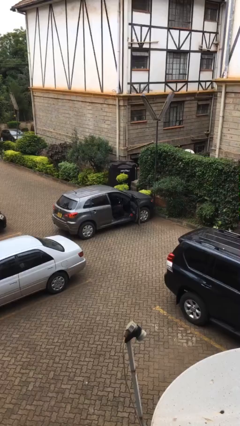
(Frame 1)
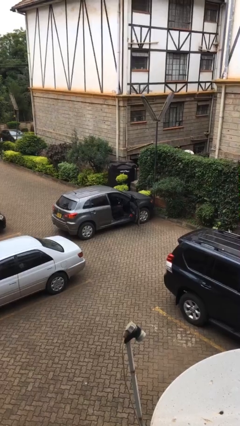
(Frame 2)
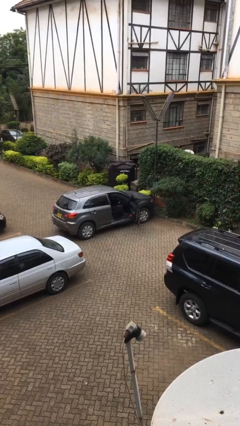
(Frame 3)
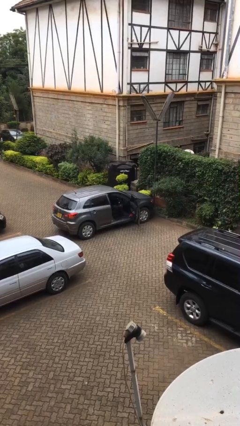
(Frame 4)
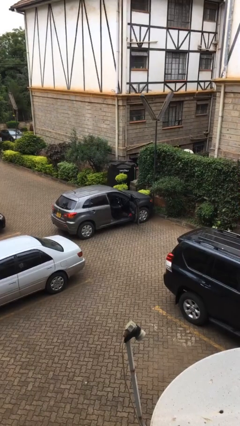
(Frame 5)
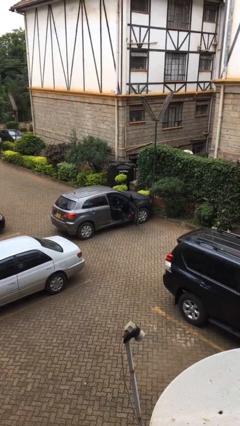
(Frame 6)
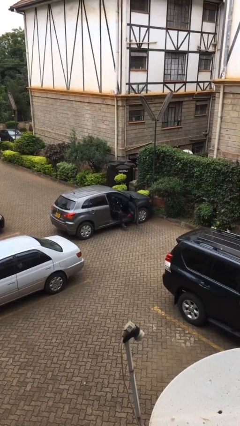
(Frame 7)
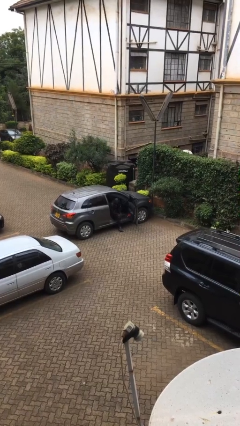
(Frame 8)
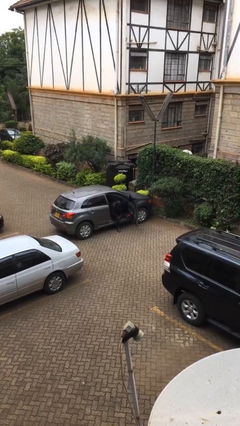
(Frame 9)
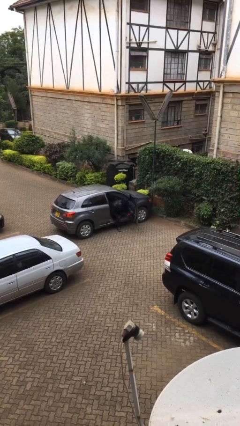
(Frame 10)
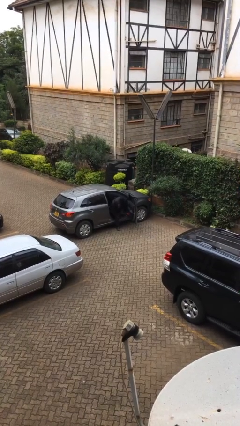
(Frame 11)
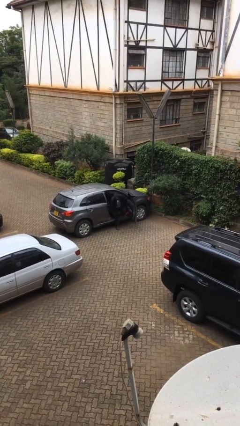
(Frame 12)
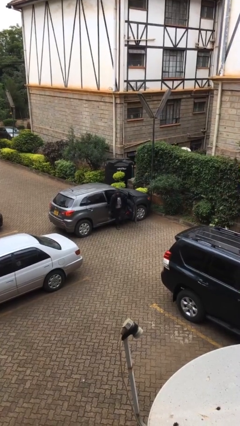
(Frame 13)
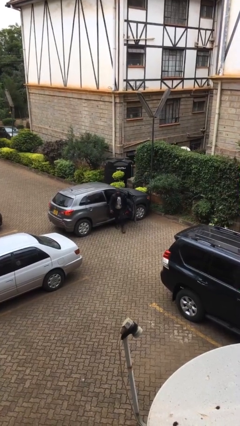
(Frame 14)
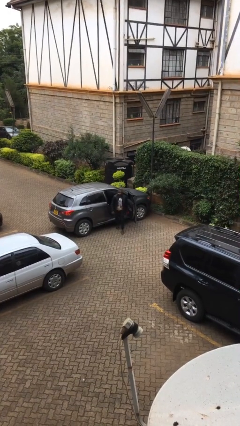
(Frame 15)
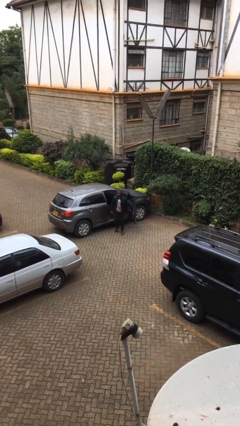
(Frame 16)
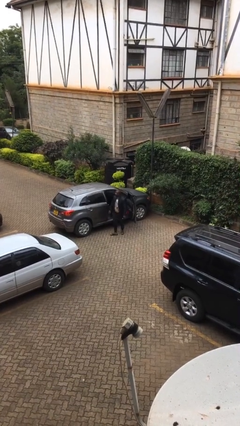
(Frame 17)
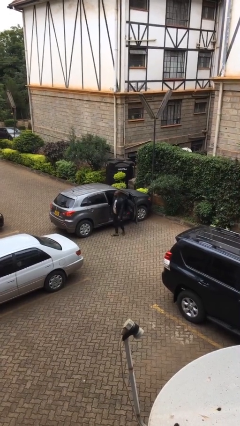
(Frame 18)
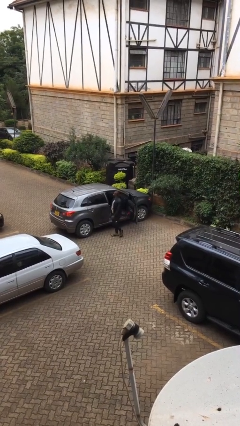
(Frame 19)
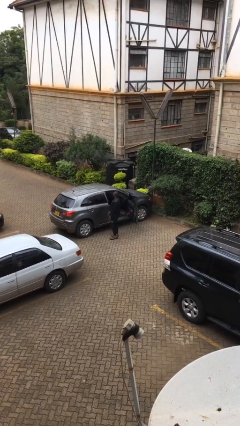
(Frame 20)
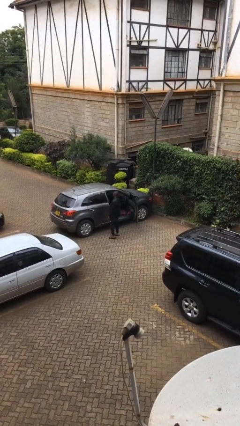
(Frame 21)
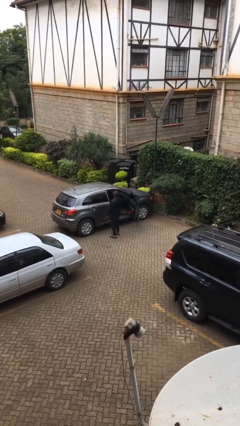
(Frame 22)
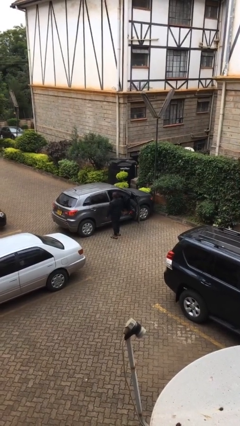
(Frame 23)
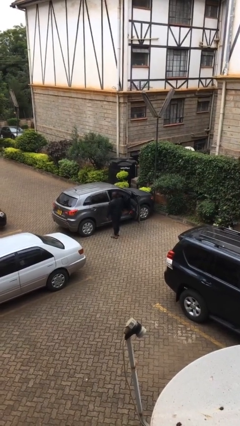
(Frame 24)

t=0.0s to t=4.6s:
person exits car

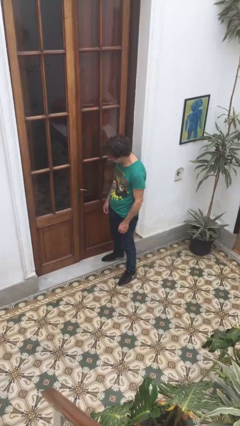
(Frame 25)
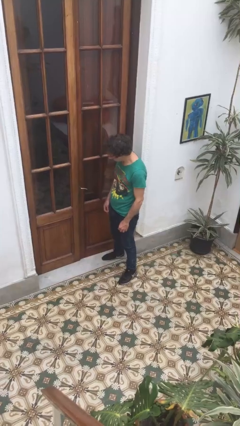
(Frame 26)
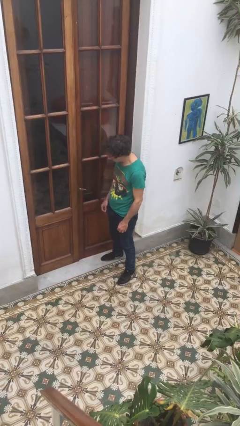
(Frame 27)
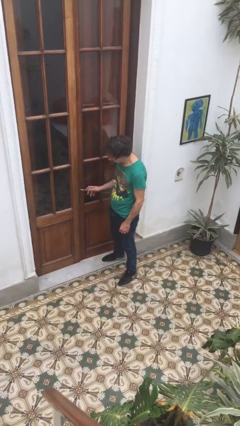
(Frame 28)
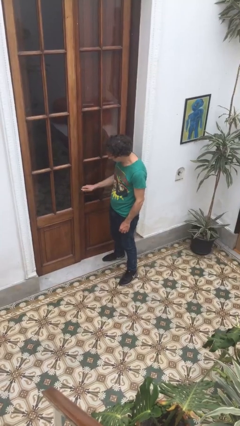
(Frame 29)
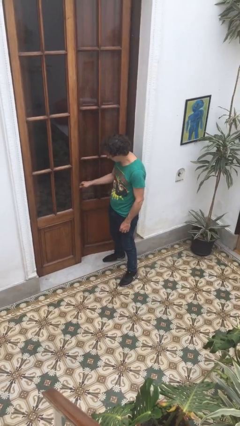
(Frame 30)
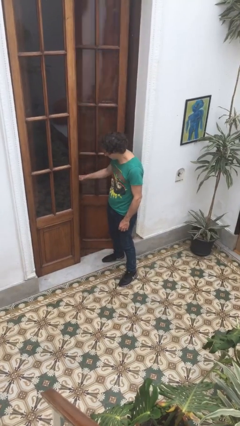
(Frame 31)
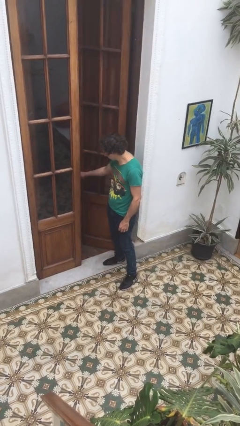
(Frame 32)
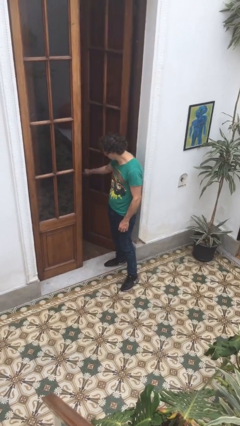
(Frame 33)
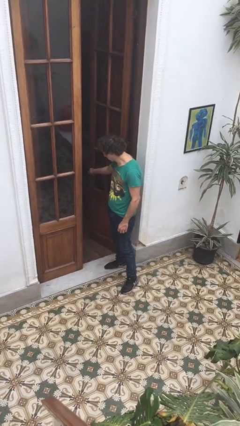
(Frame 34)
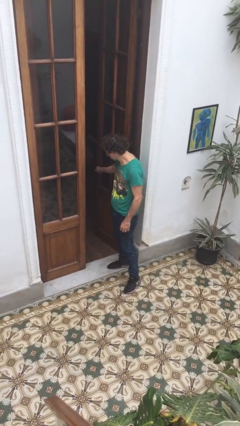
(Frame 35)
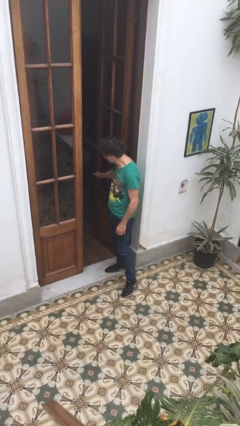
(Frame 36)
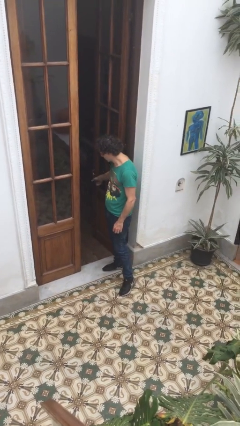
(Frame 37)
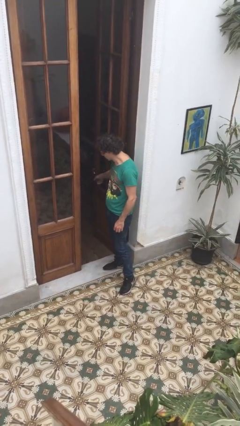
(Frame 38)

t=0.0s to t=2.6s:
person opens facility door

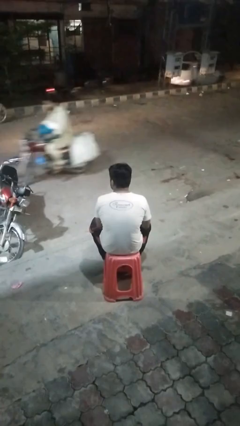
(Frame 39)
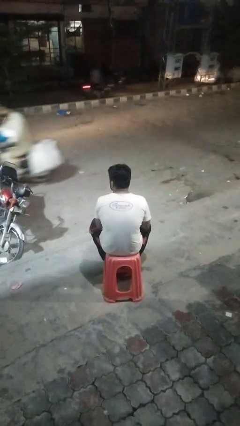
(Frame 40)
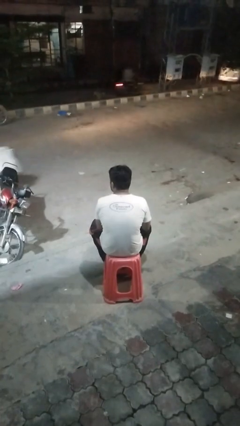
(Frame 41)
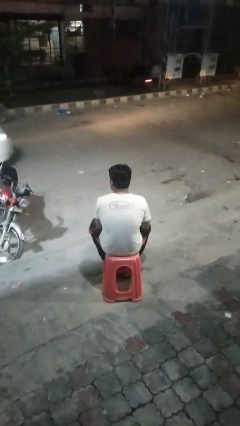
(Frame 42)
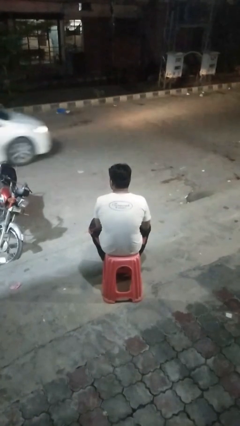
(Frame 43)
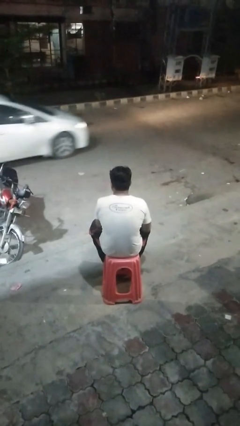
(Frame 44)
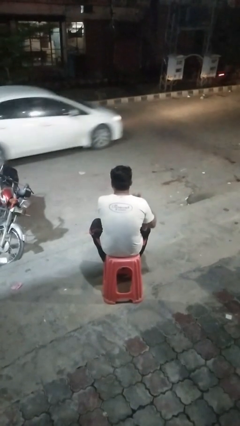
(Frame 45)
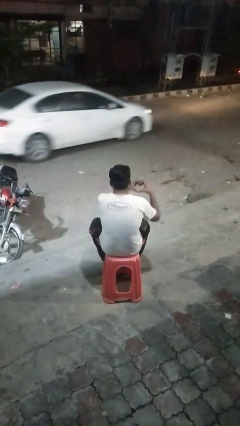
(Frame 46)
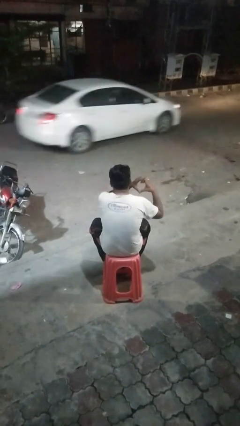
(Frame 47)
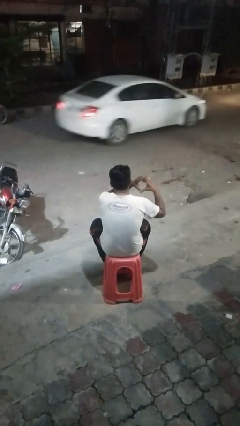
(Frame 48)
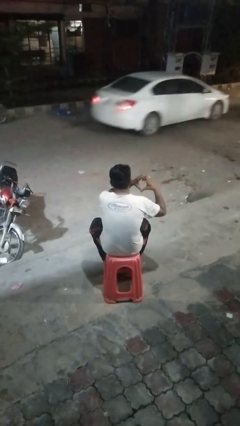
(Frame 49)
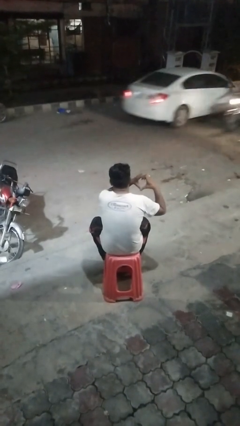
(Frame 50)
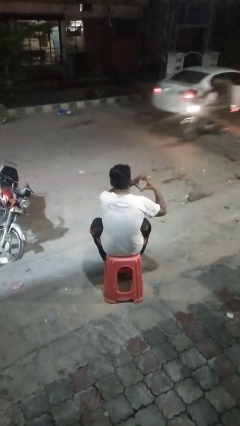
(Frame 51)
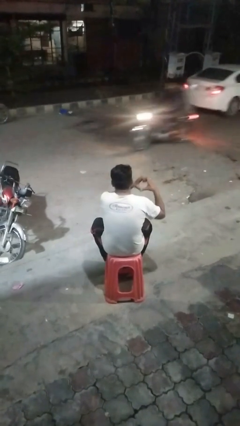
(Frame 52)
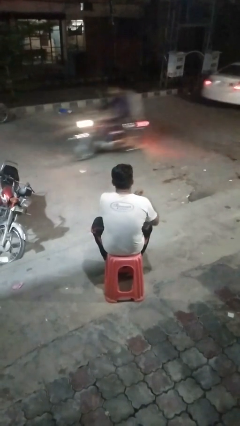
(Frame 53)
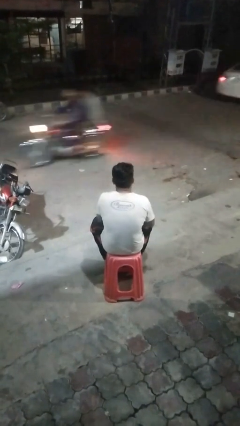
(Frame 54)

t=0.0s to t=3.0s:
person gestures heart

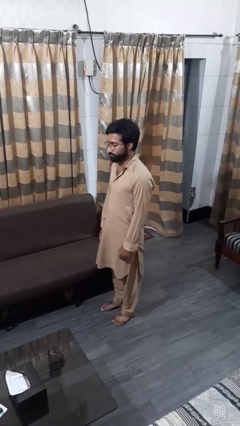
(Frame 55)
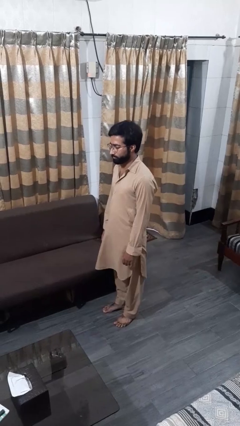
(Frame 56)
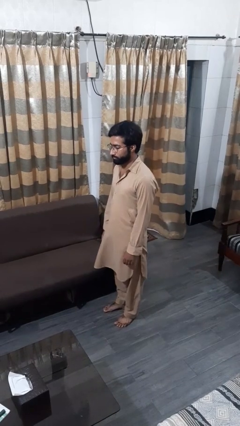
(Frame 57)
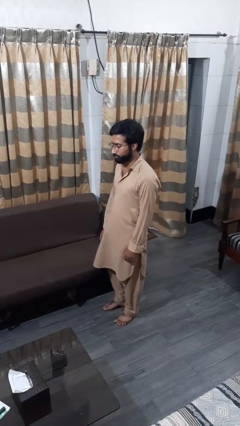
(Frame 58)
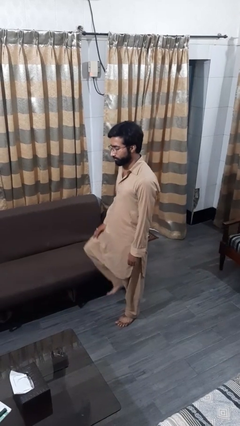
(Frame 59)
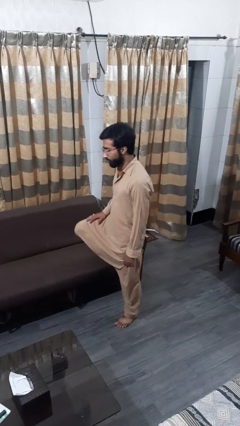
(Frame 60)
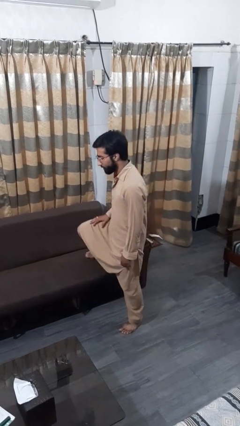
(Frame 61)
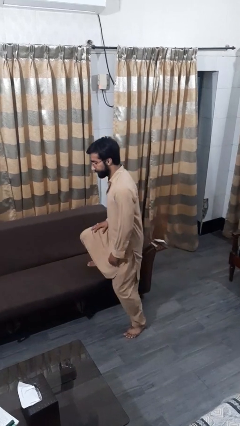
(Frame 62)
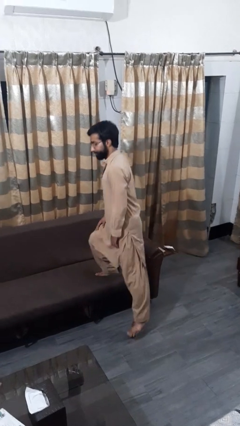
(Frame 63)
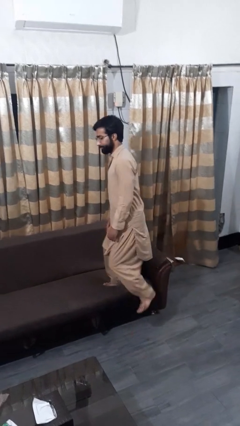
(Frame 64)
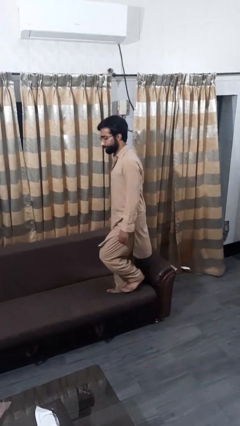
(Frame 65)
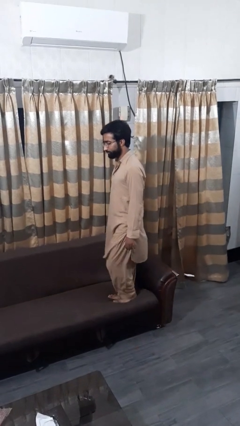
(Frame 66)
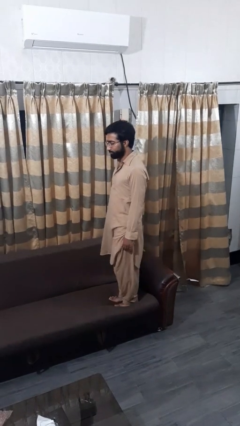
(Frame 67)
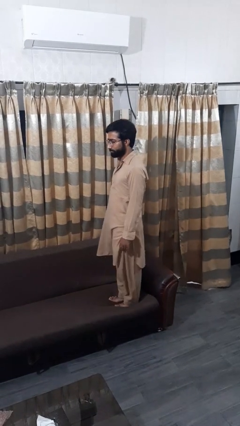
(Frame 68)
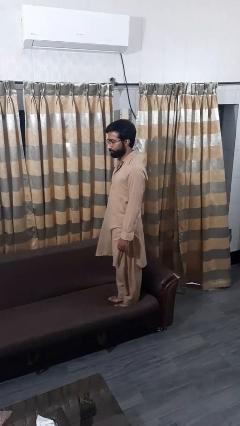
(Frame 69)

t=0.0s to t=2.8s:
person climbs on couch

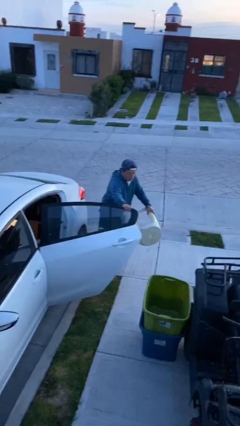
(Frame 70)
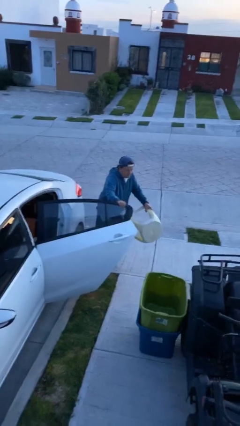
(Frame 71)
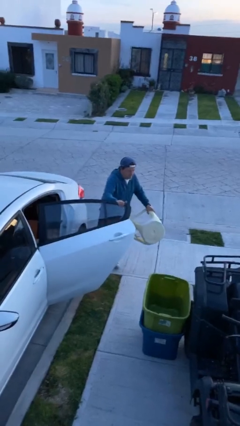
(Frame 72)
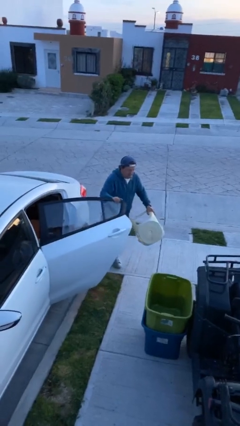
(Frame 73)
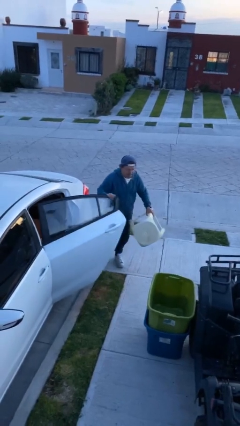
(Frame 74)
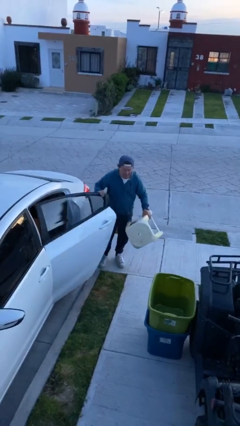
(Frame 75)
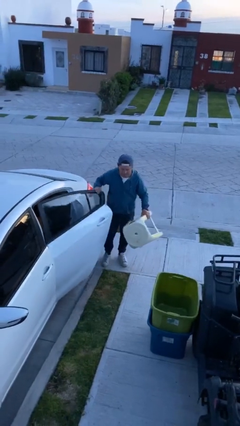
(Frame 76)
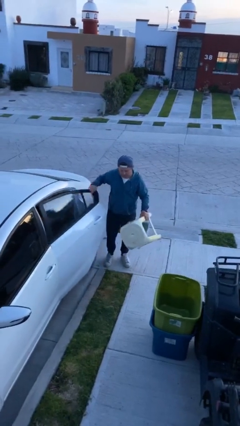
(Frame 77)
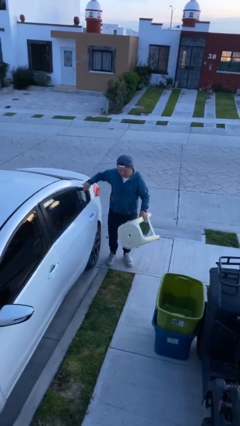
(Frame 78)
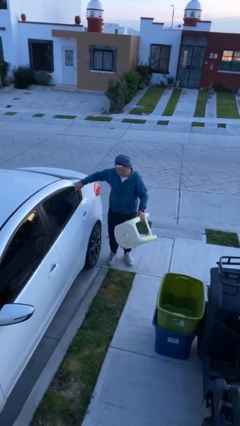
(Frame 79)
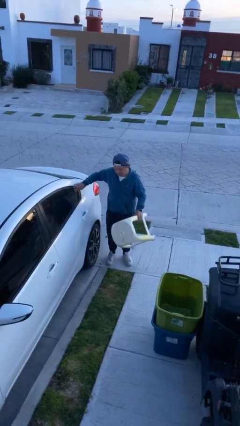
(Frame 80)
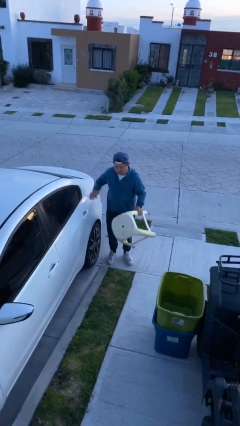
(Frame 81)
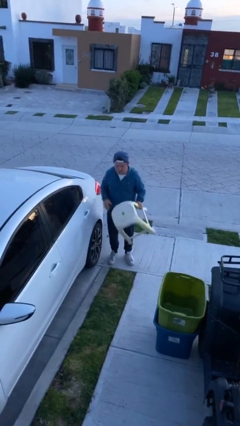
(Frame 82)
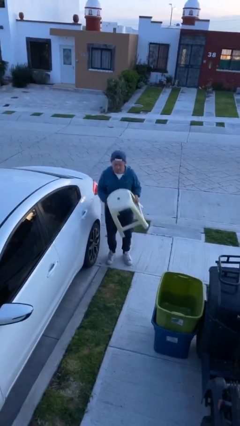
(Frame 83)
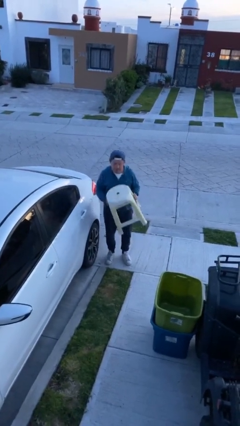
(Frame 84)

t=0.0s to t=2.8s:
person closes car door

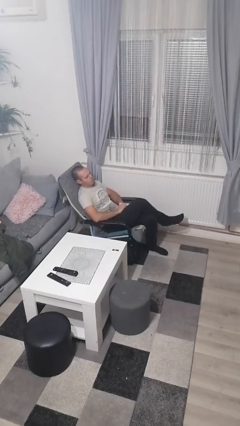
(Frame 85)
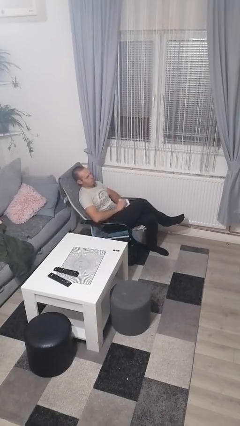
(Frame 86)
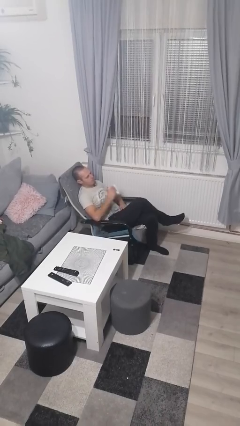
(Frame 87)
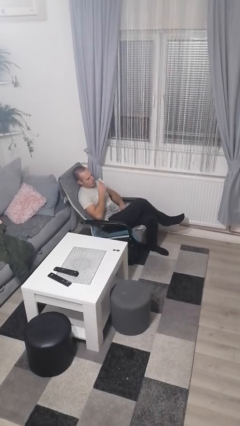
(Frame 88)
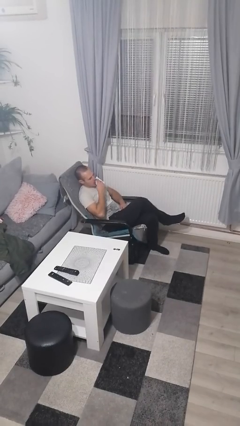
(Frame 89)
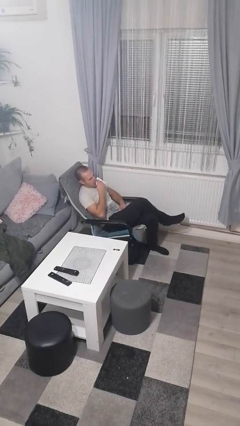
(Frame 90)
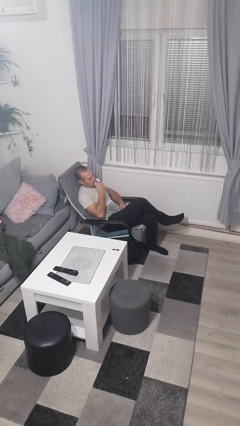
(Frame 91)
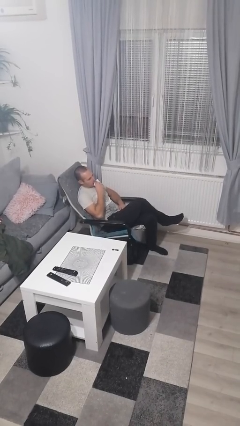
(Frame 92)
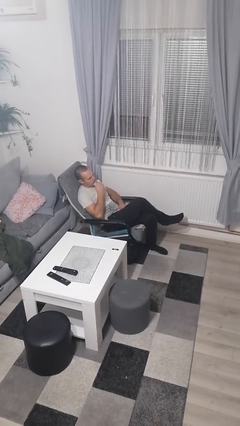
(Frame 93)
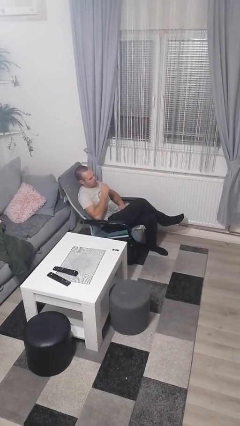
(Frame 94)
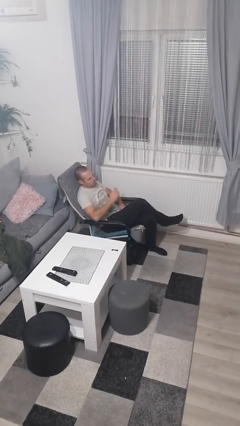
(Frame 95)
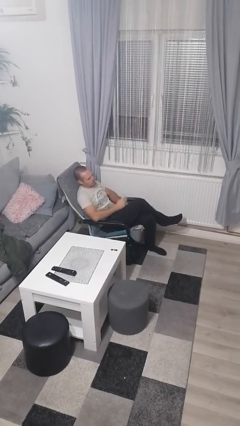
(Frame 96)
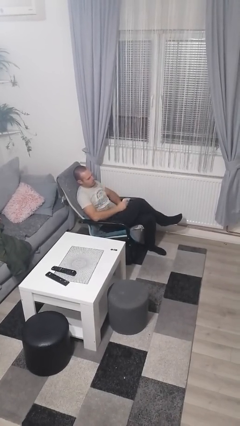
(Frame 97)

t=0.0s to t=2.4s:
person wipes mouth with napkin
